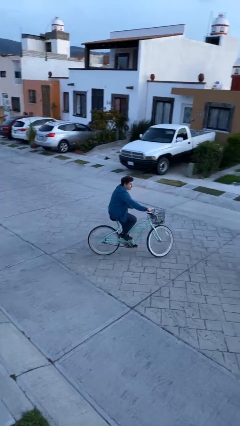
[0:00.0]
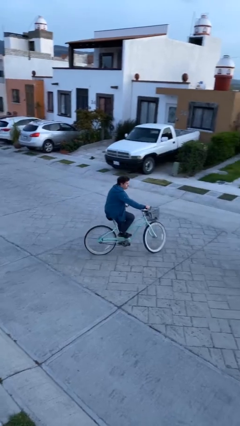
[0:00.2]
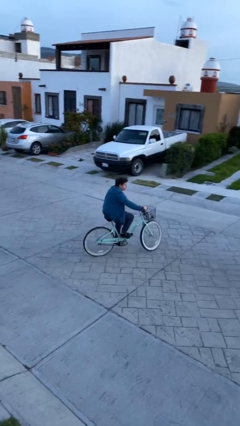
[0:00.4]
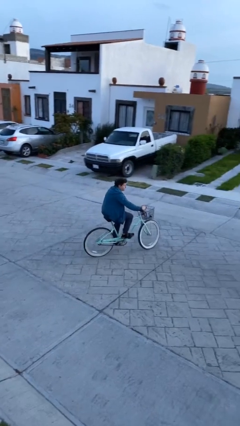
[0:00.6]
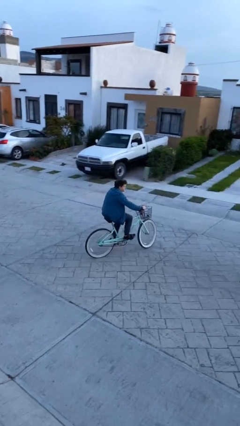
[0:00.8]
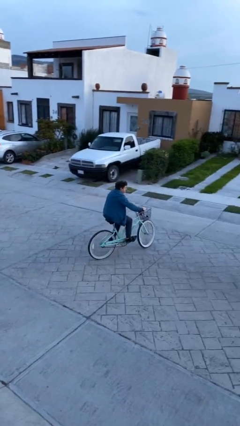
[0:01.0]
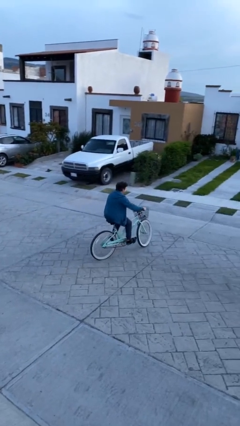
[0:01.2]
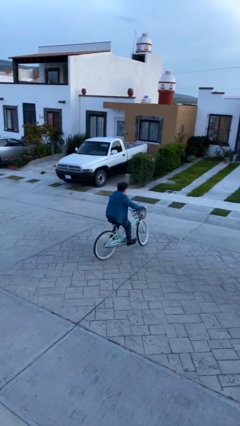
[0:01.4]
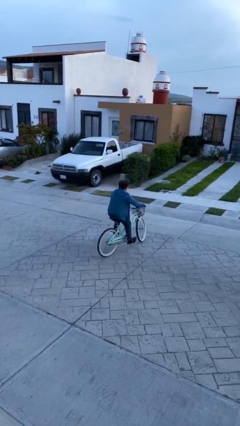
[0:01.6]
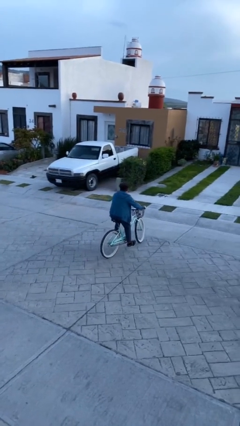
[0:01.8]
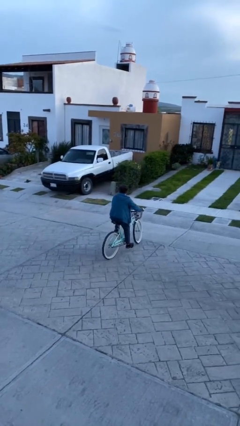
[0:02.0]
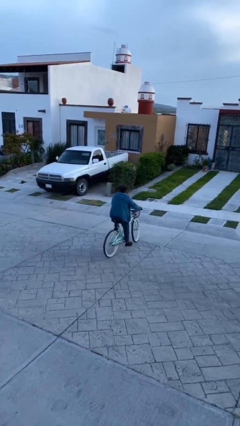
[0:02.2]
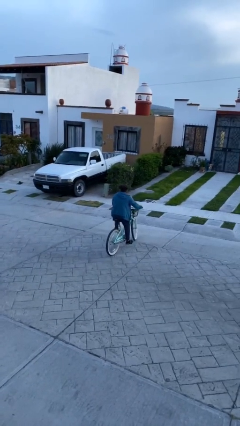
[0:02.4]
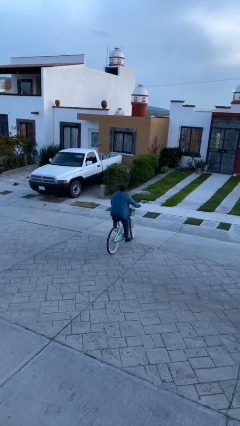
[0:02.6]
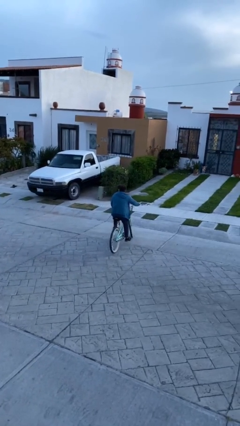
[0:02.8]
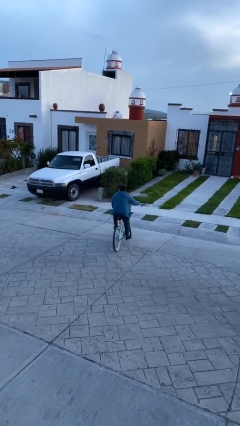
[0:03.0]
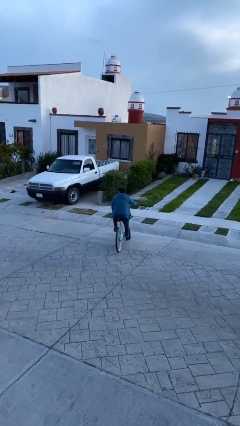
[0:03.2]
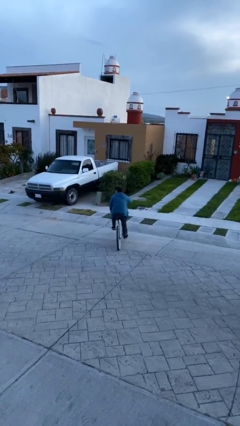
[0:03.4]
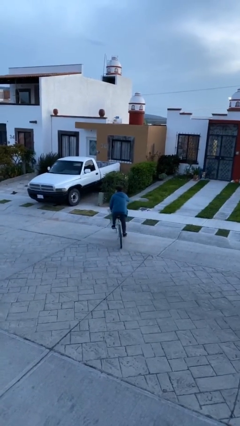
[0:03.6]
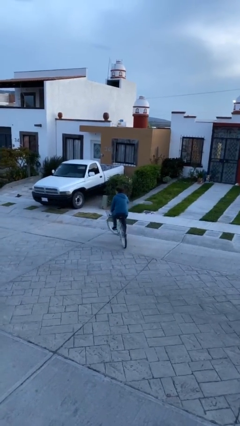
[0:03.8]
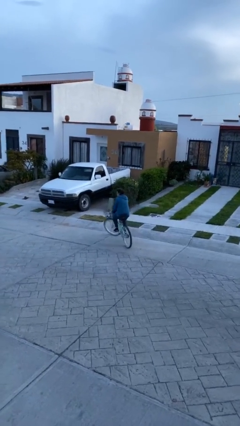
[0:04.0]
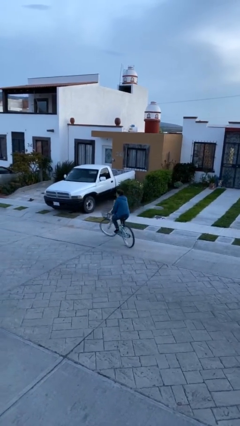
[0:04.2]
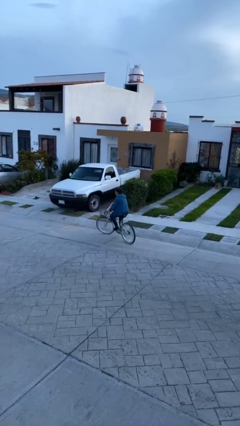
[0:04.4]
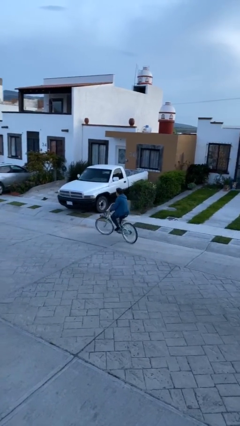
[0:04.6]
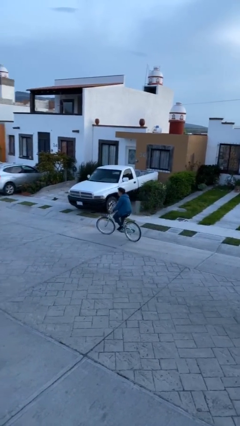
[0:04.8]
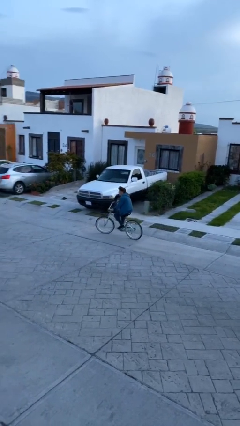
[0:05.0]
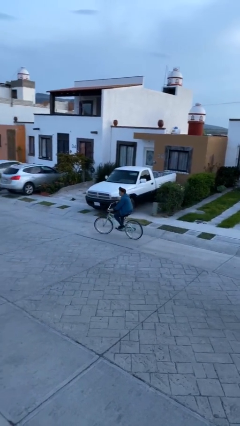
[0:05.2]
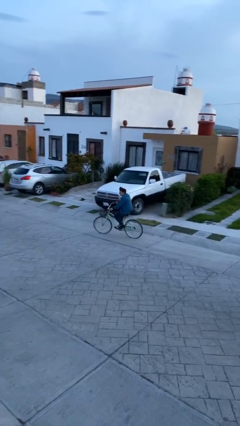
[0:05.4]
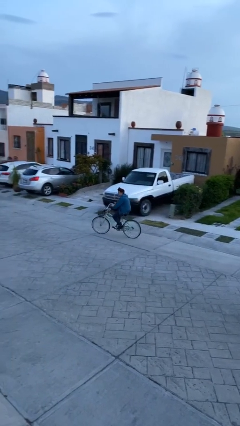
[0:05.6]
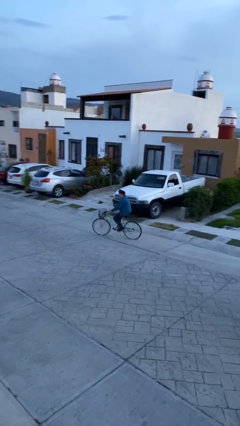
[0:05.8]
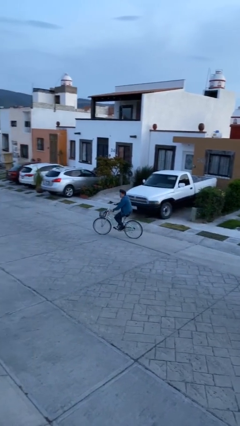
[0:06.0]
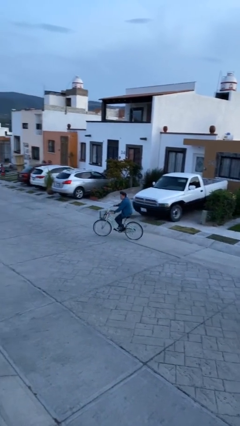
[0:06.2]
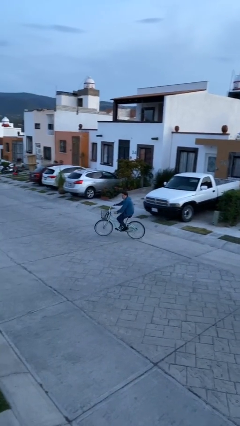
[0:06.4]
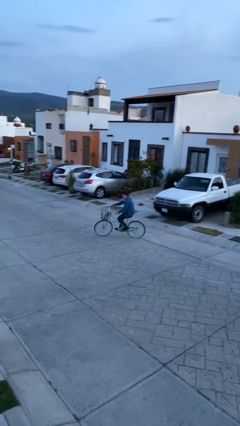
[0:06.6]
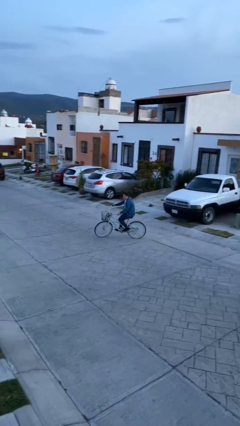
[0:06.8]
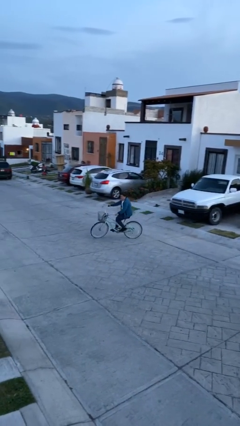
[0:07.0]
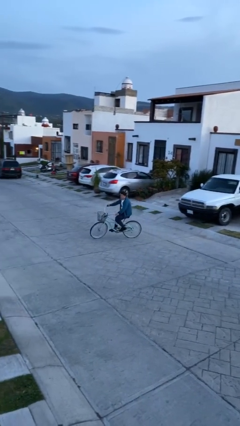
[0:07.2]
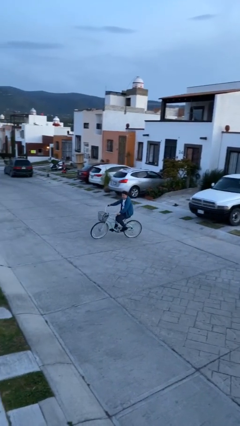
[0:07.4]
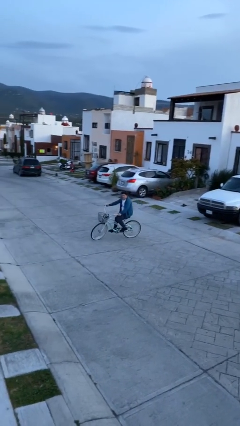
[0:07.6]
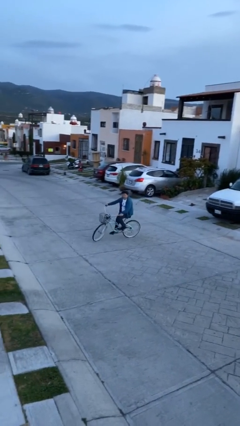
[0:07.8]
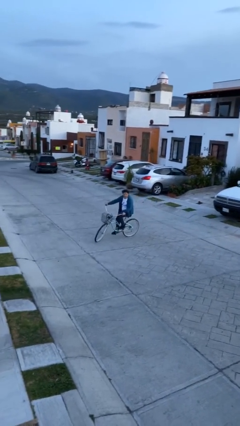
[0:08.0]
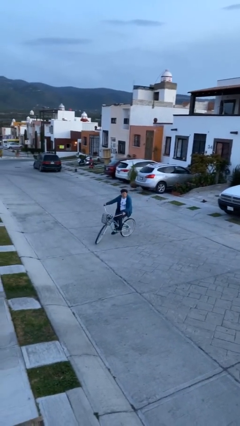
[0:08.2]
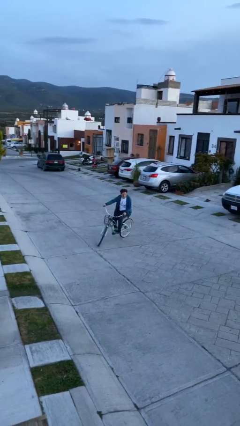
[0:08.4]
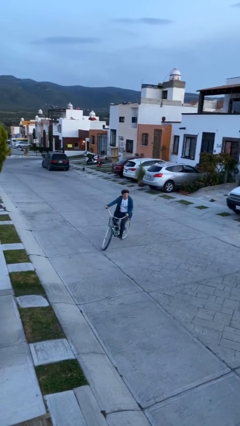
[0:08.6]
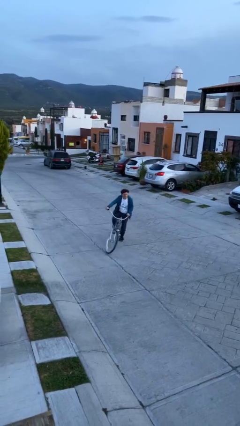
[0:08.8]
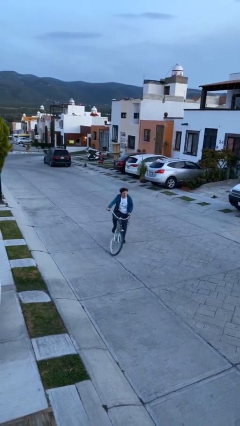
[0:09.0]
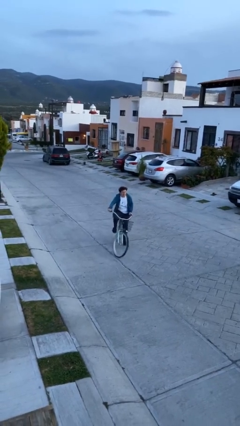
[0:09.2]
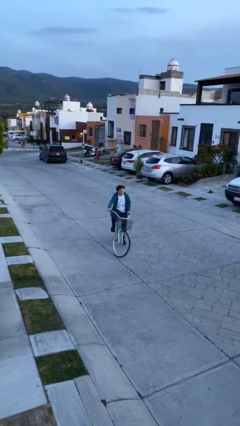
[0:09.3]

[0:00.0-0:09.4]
person rides bicycle

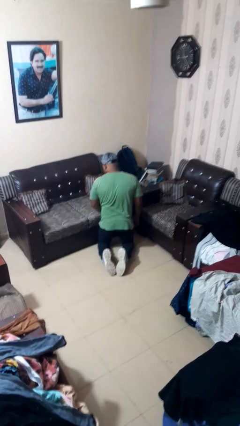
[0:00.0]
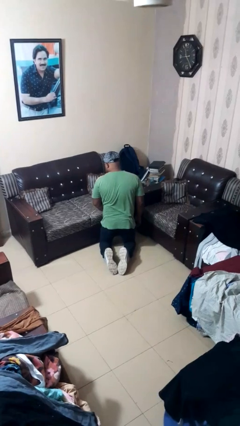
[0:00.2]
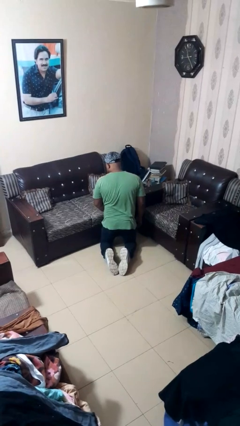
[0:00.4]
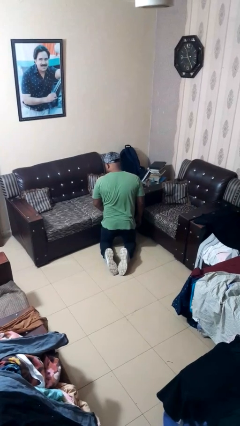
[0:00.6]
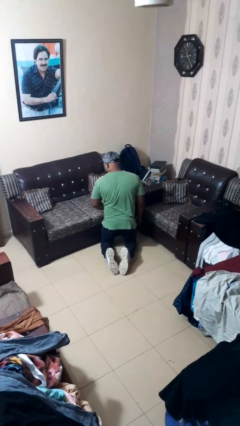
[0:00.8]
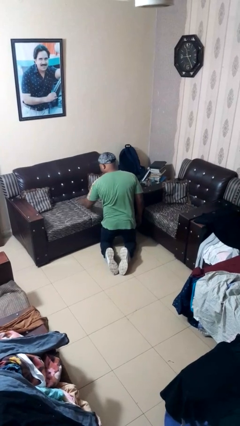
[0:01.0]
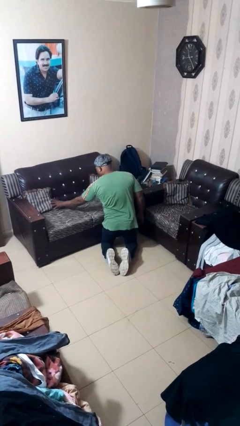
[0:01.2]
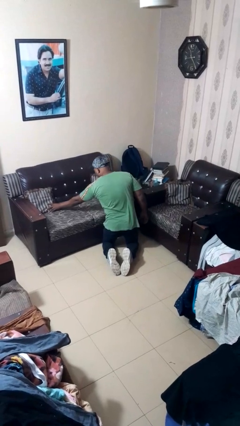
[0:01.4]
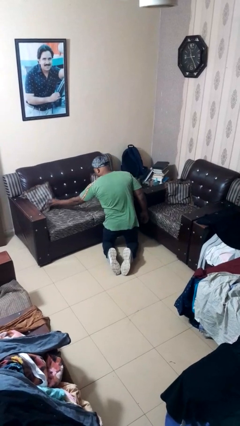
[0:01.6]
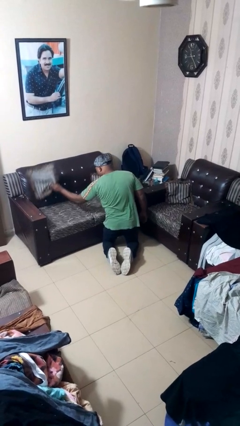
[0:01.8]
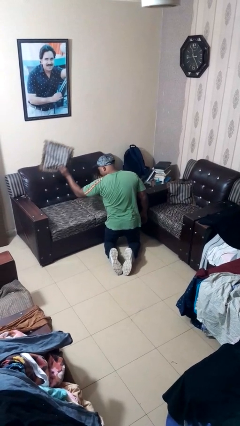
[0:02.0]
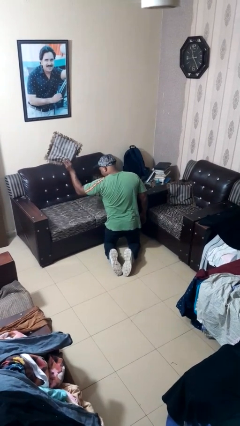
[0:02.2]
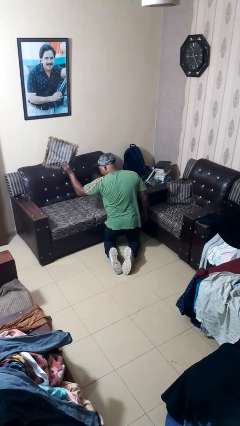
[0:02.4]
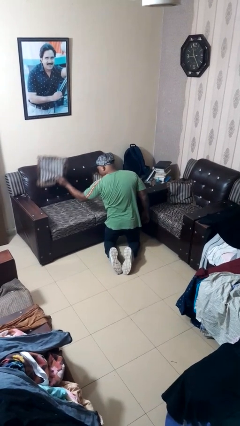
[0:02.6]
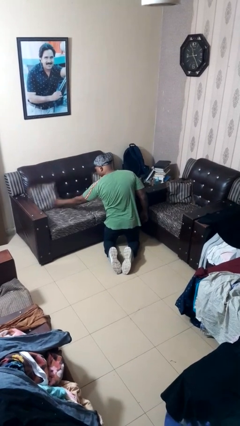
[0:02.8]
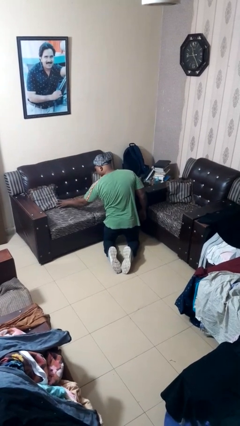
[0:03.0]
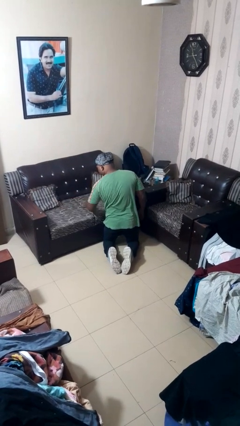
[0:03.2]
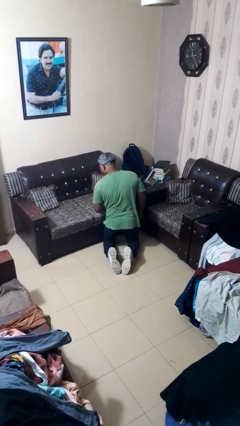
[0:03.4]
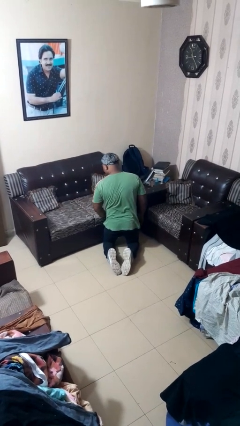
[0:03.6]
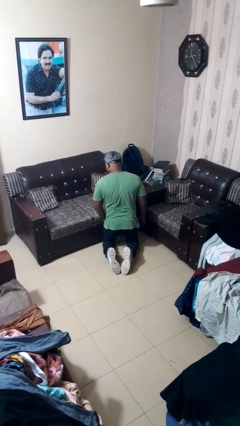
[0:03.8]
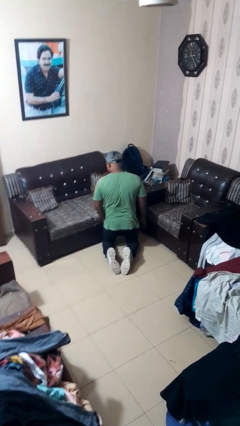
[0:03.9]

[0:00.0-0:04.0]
person searches in couch

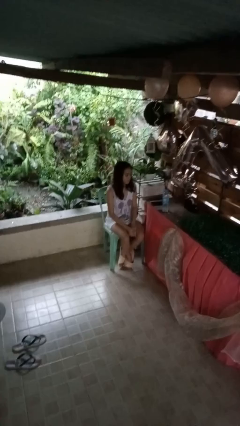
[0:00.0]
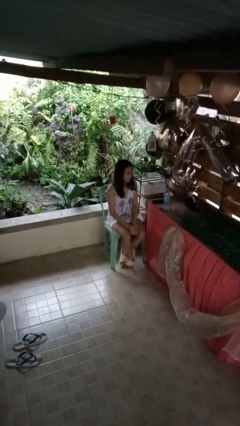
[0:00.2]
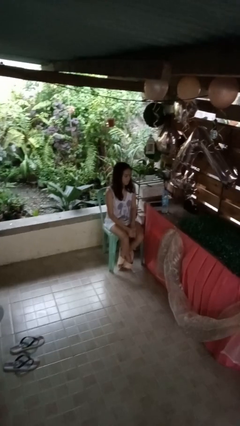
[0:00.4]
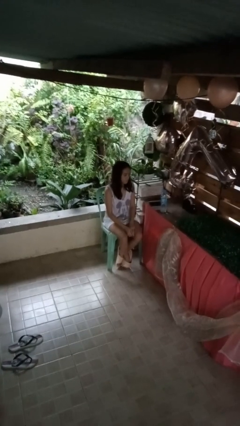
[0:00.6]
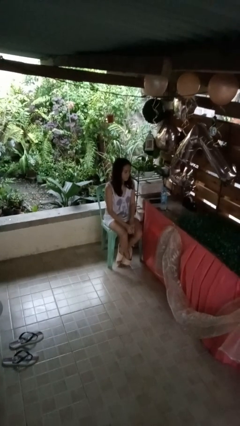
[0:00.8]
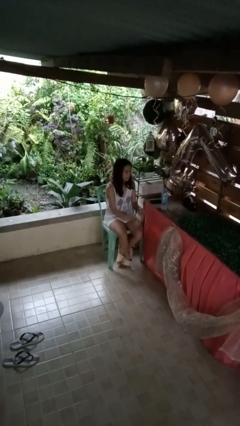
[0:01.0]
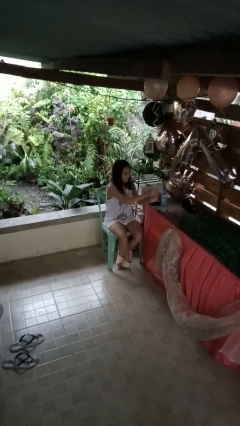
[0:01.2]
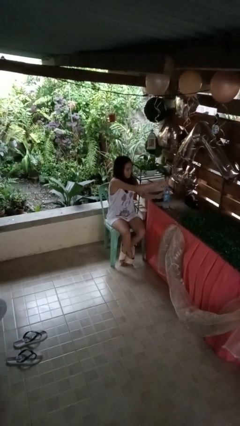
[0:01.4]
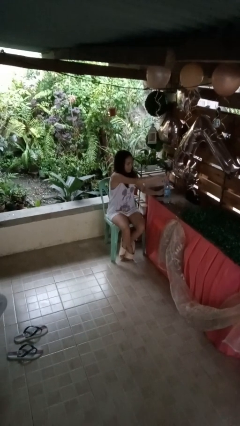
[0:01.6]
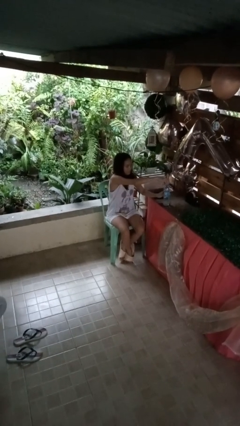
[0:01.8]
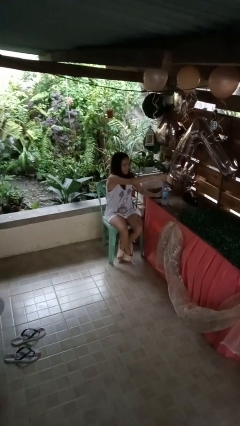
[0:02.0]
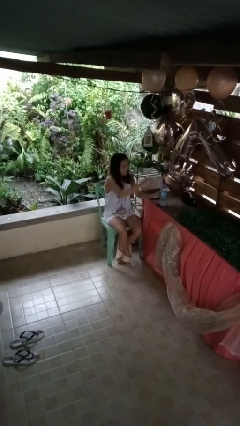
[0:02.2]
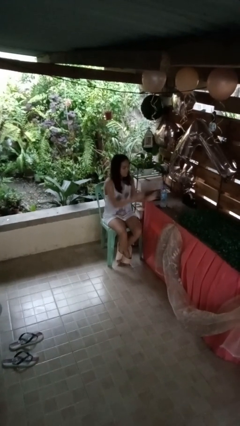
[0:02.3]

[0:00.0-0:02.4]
person unscrews lid from bottle

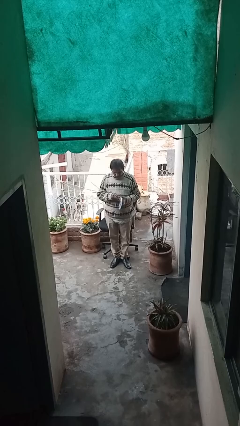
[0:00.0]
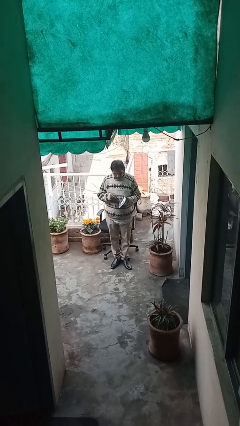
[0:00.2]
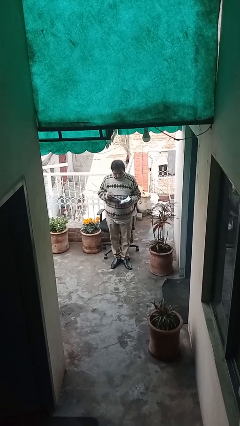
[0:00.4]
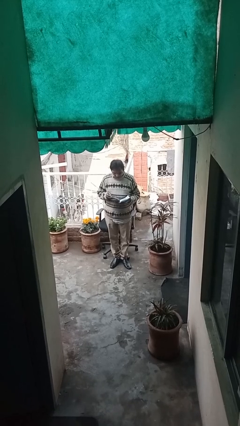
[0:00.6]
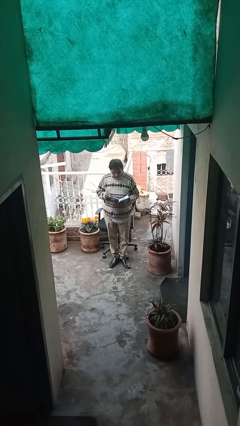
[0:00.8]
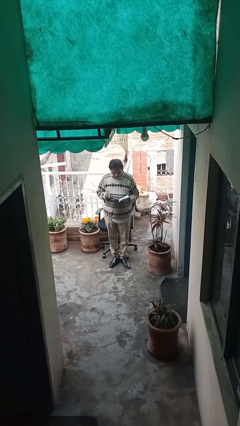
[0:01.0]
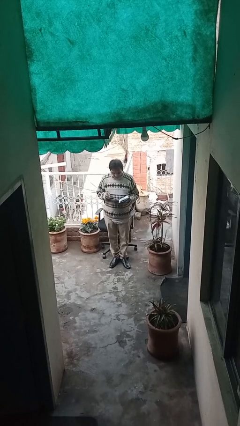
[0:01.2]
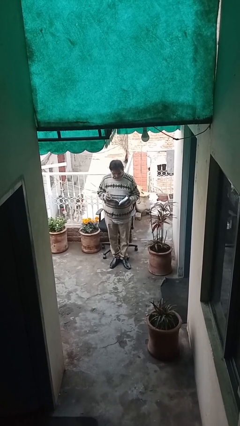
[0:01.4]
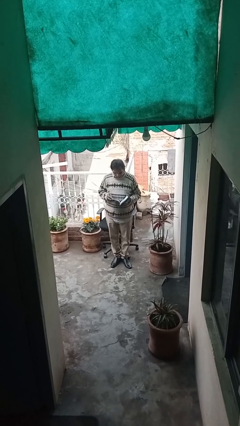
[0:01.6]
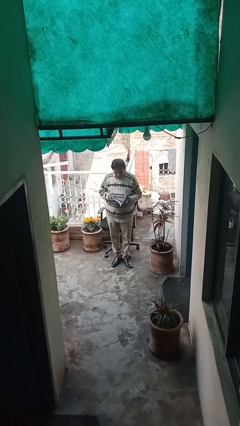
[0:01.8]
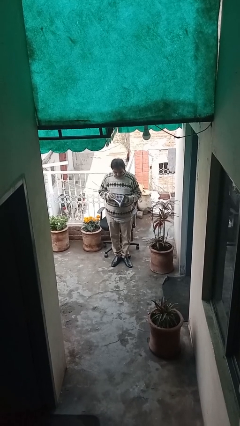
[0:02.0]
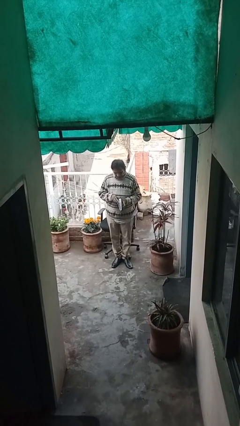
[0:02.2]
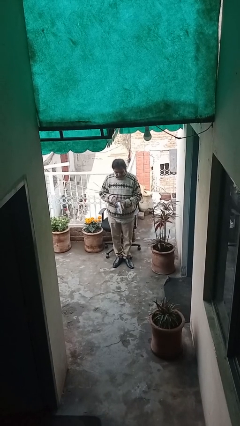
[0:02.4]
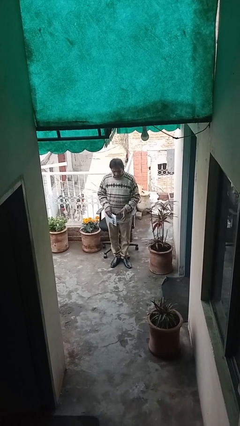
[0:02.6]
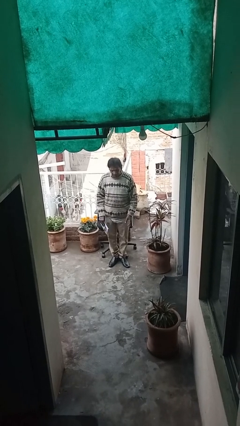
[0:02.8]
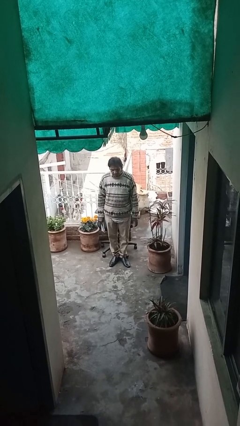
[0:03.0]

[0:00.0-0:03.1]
person reads document
